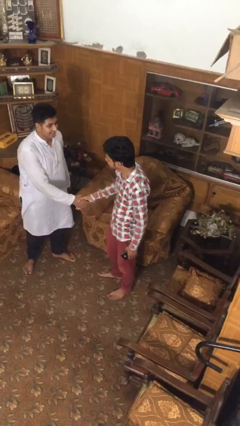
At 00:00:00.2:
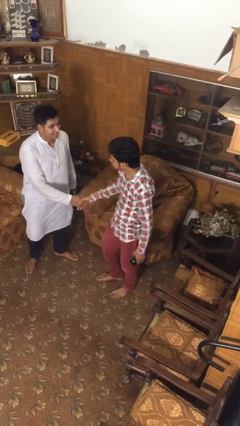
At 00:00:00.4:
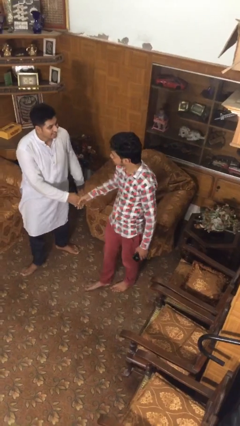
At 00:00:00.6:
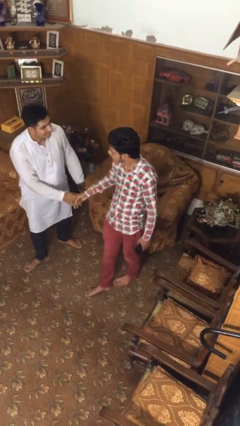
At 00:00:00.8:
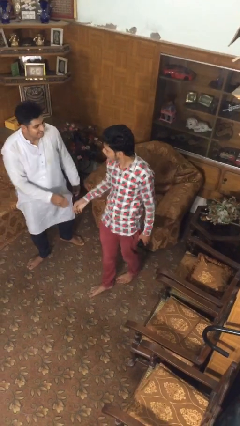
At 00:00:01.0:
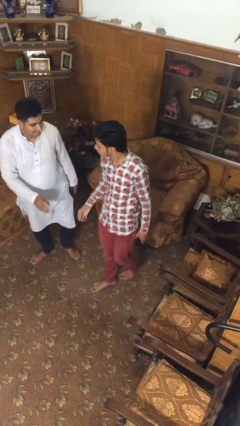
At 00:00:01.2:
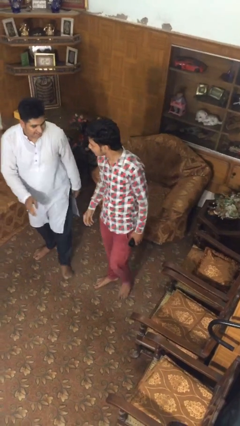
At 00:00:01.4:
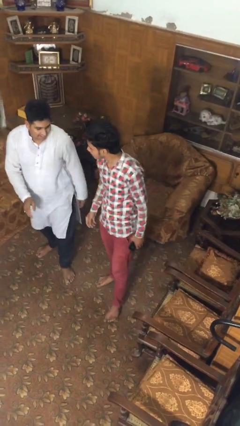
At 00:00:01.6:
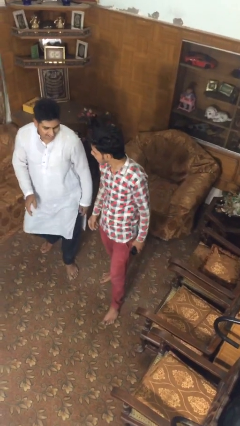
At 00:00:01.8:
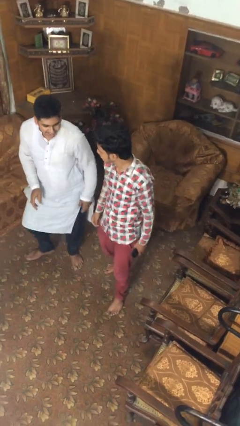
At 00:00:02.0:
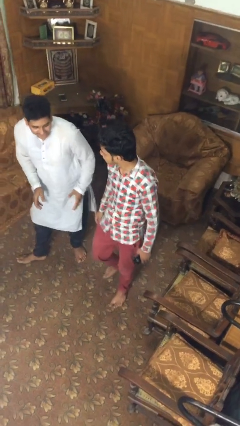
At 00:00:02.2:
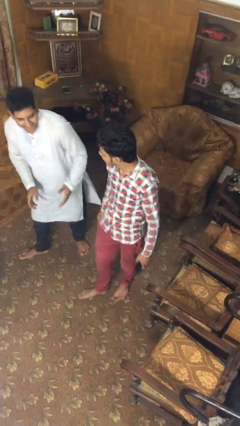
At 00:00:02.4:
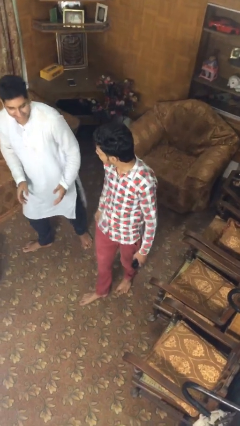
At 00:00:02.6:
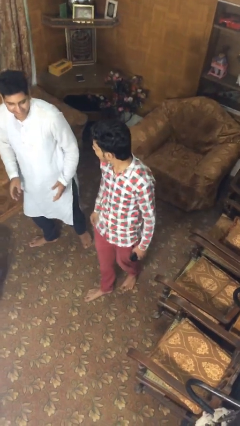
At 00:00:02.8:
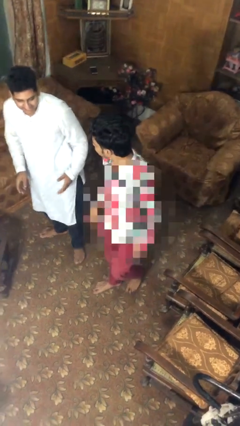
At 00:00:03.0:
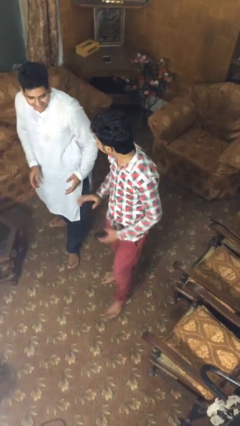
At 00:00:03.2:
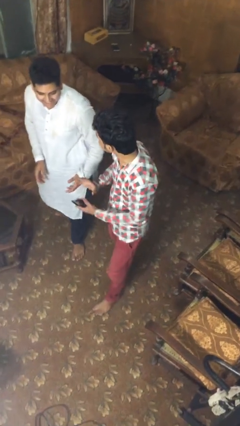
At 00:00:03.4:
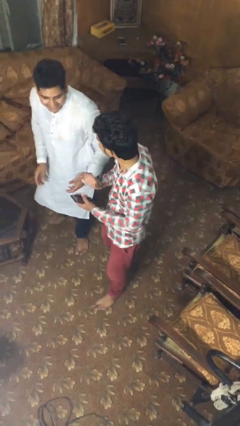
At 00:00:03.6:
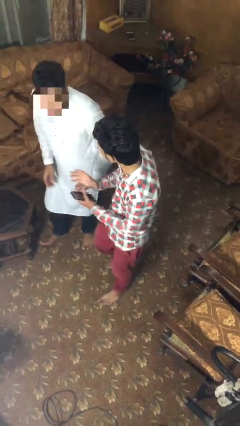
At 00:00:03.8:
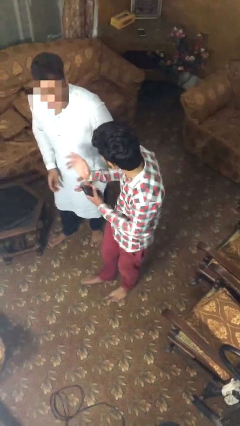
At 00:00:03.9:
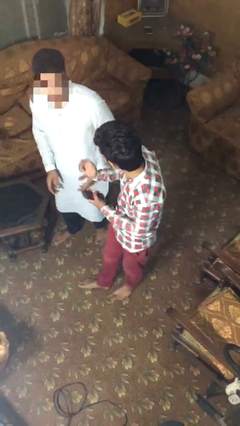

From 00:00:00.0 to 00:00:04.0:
person talks to person

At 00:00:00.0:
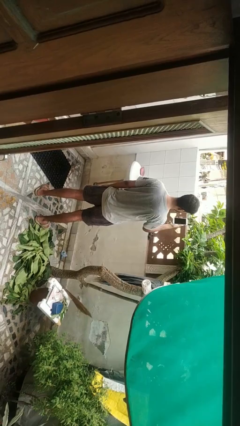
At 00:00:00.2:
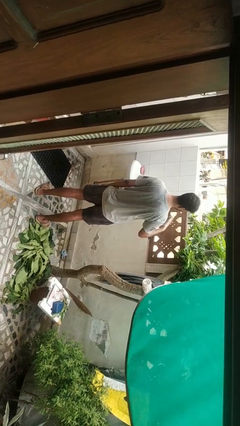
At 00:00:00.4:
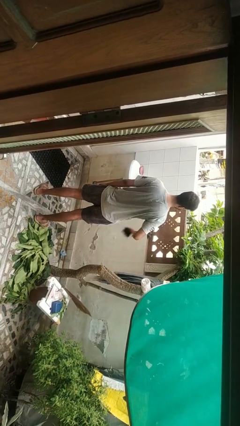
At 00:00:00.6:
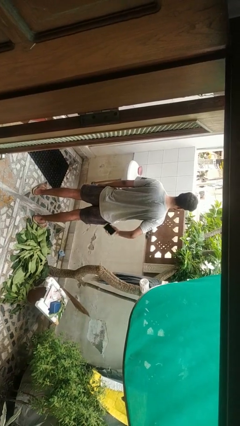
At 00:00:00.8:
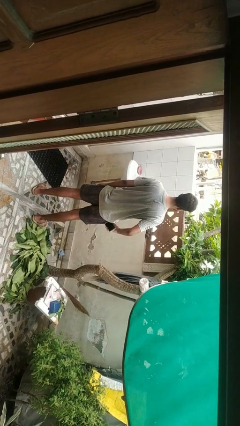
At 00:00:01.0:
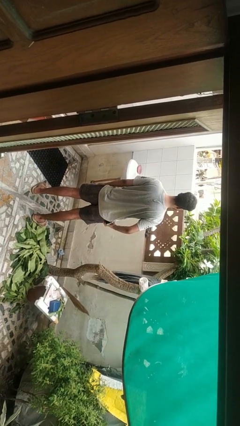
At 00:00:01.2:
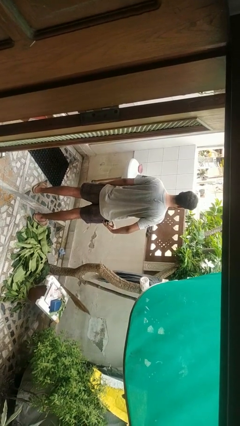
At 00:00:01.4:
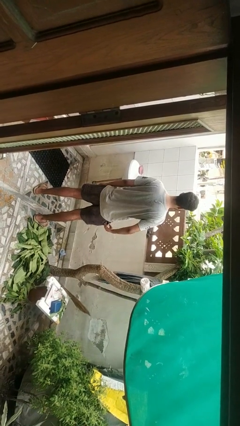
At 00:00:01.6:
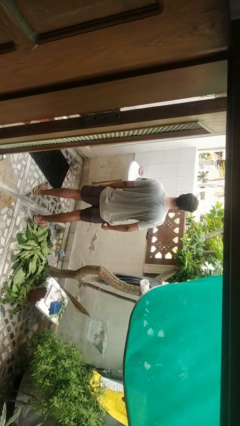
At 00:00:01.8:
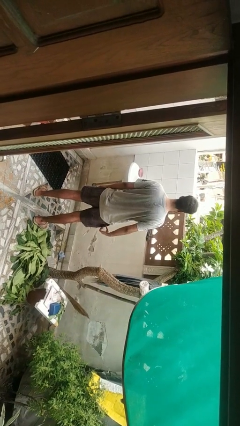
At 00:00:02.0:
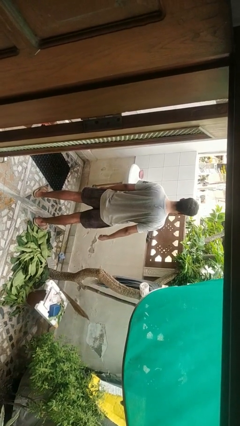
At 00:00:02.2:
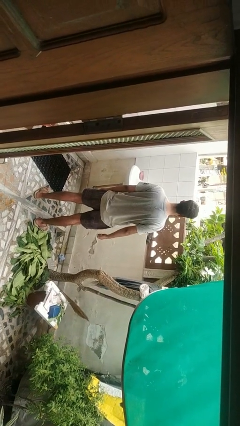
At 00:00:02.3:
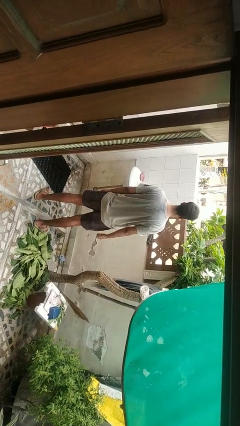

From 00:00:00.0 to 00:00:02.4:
person puts phone into pocket

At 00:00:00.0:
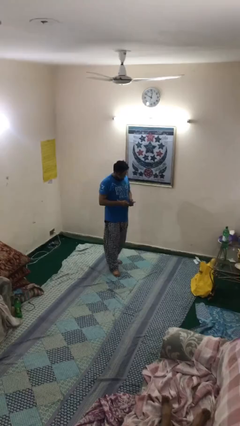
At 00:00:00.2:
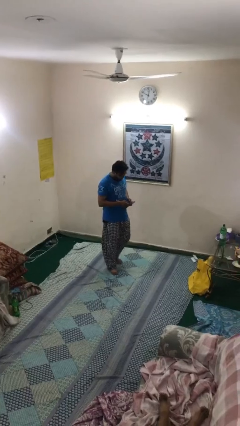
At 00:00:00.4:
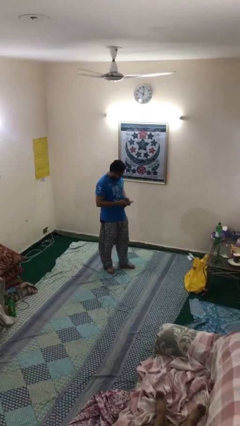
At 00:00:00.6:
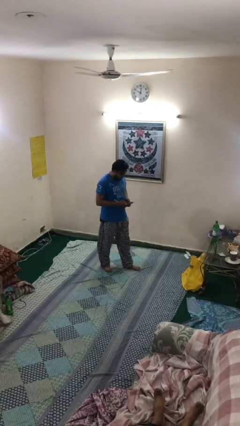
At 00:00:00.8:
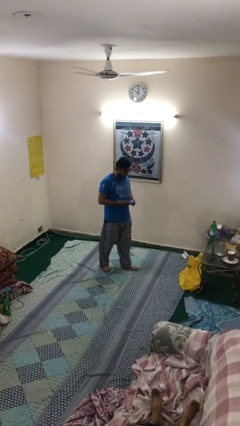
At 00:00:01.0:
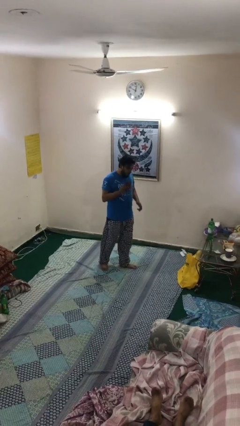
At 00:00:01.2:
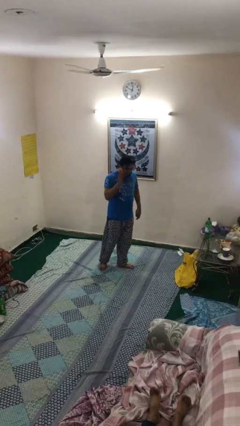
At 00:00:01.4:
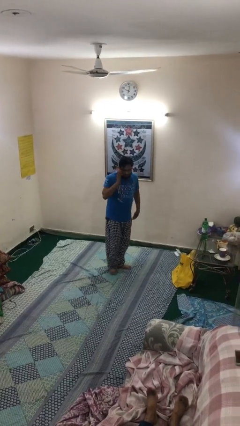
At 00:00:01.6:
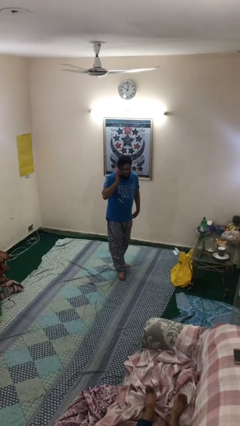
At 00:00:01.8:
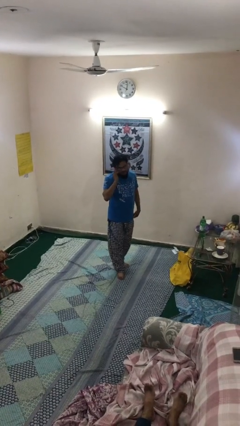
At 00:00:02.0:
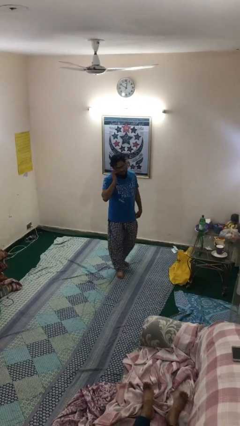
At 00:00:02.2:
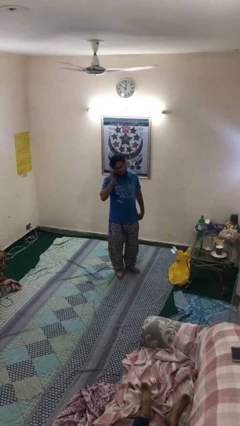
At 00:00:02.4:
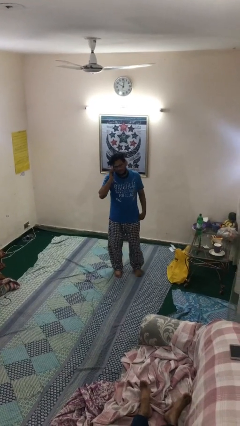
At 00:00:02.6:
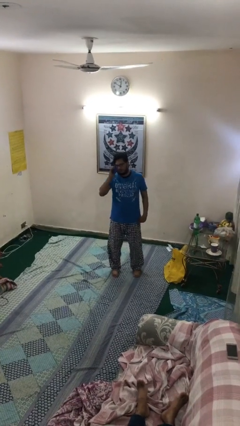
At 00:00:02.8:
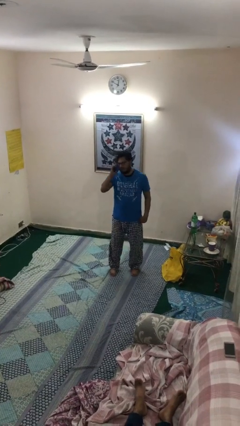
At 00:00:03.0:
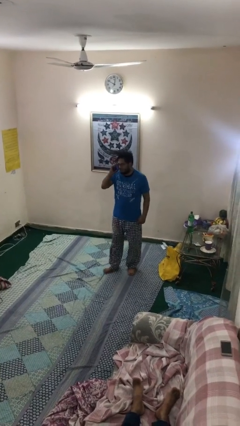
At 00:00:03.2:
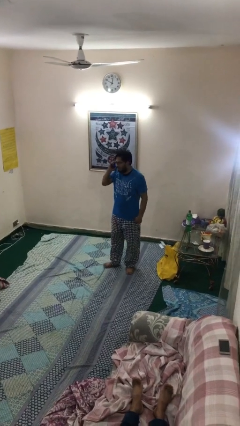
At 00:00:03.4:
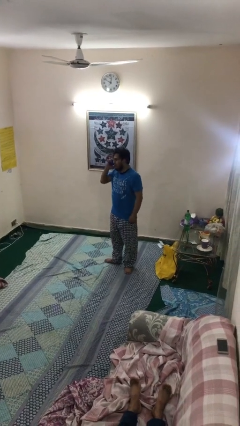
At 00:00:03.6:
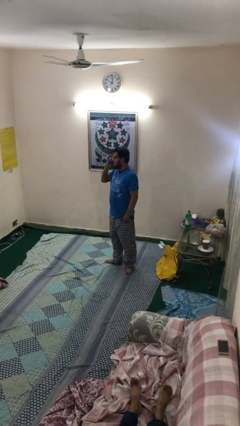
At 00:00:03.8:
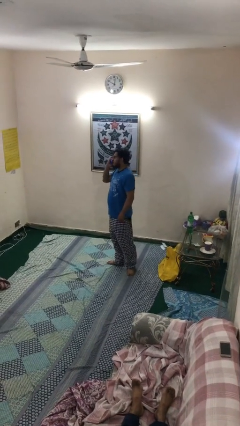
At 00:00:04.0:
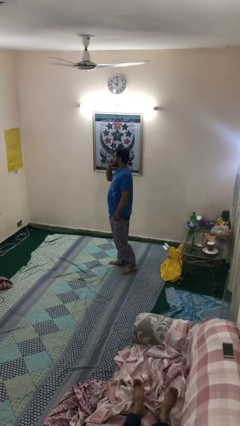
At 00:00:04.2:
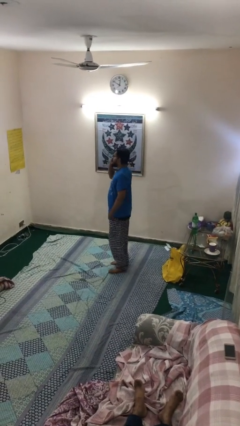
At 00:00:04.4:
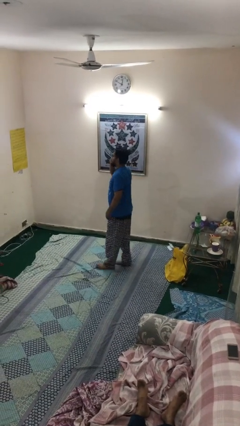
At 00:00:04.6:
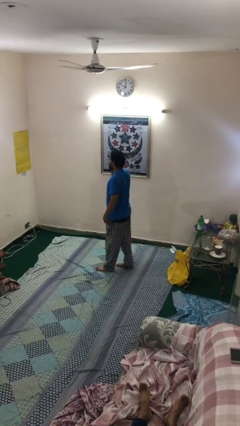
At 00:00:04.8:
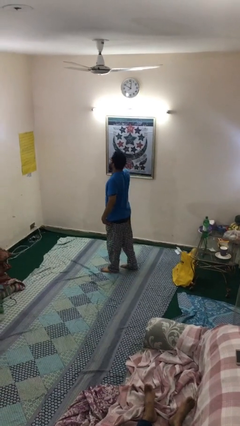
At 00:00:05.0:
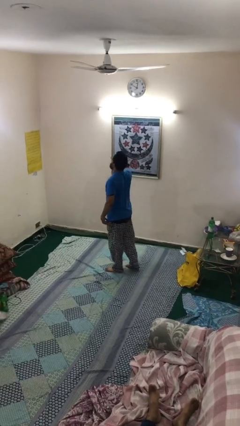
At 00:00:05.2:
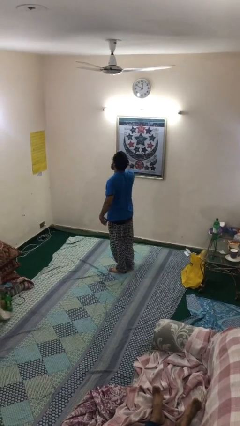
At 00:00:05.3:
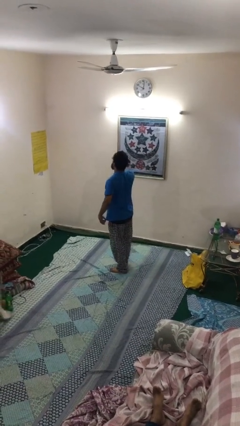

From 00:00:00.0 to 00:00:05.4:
person talks on phone

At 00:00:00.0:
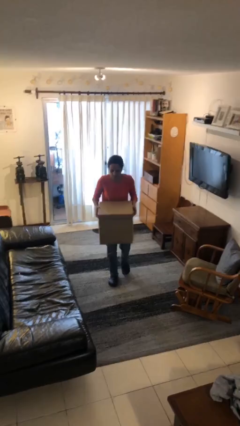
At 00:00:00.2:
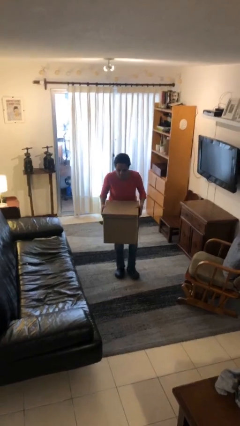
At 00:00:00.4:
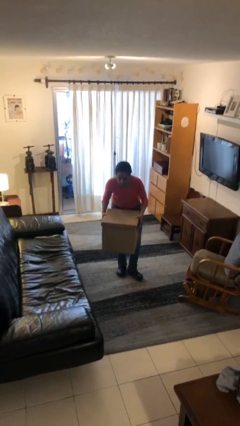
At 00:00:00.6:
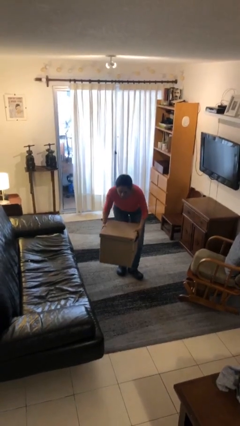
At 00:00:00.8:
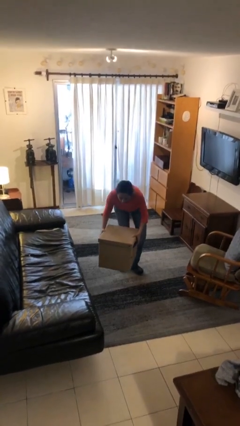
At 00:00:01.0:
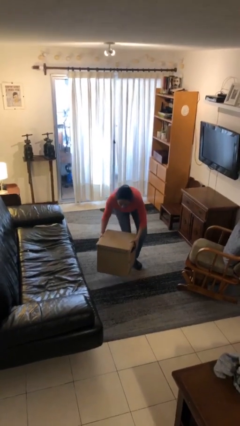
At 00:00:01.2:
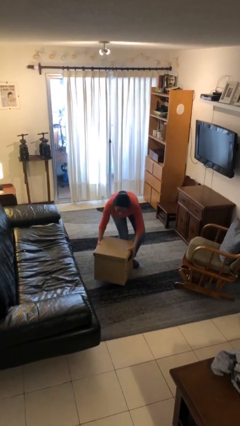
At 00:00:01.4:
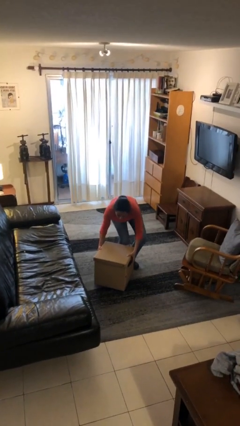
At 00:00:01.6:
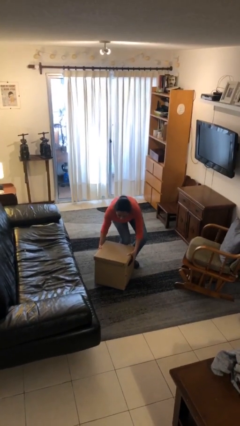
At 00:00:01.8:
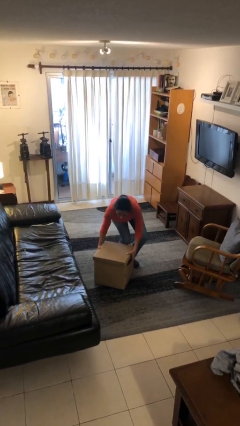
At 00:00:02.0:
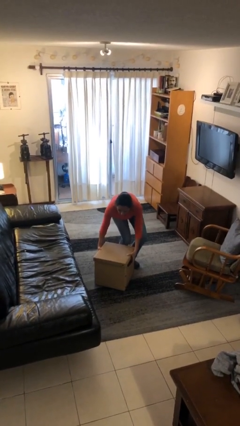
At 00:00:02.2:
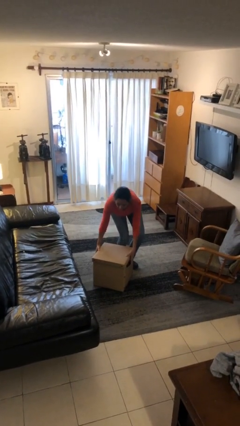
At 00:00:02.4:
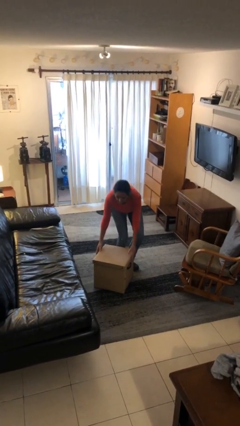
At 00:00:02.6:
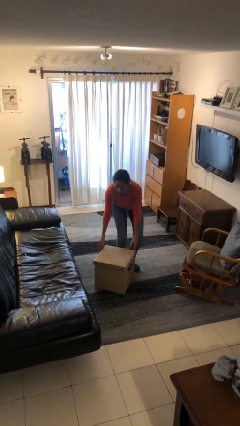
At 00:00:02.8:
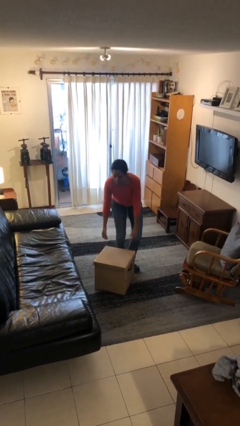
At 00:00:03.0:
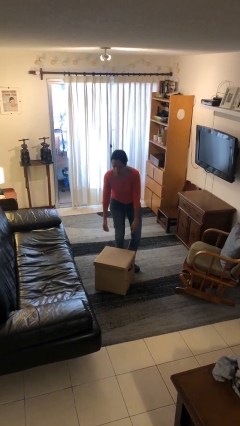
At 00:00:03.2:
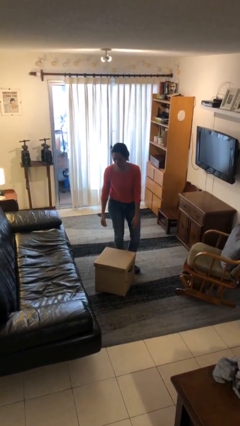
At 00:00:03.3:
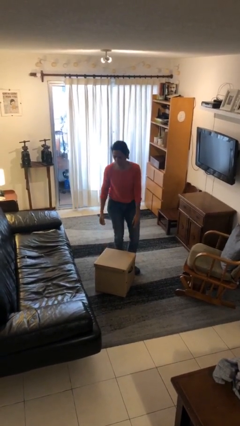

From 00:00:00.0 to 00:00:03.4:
person puts down object on floor

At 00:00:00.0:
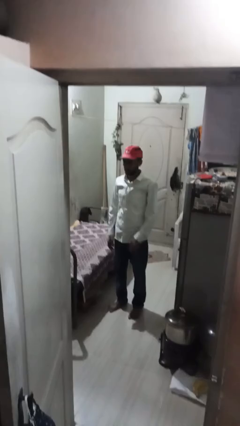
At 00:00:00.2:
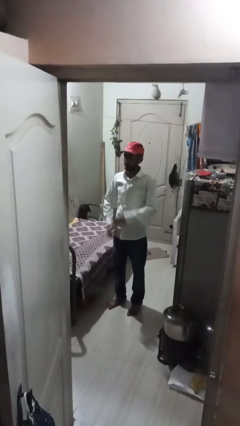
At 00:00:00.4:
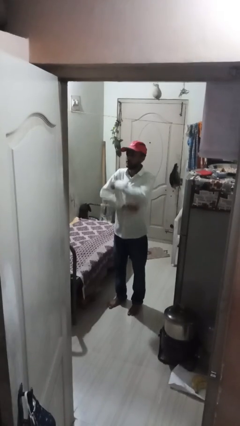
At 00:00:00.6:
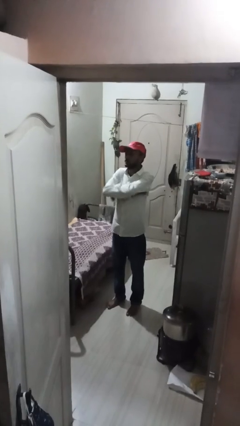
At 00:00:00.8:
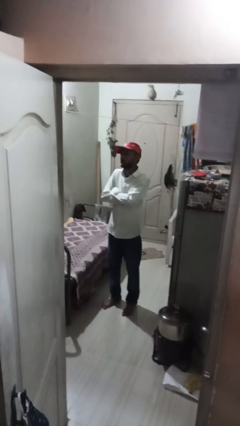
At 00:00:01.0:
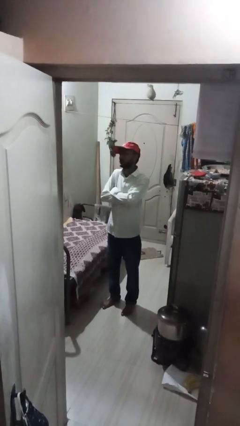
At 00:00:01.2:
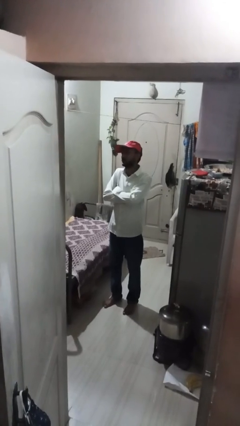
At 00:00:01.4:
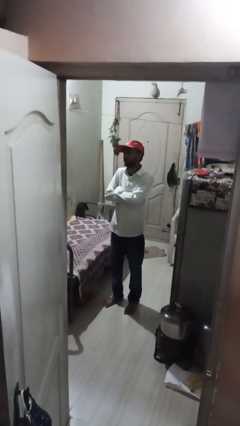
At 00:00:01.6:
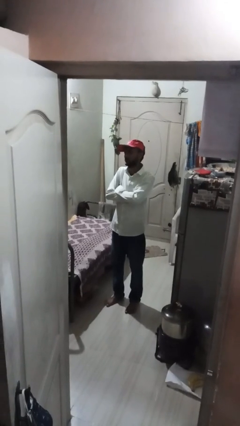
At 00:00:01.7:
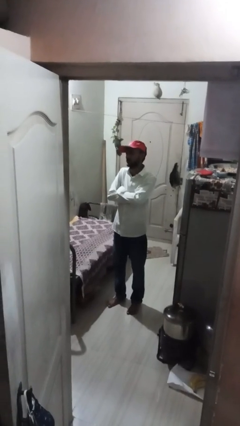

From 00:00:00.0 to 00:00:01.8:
person crosses arms

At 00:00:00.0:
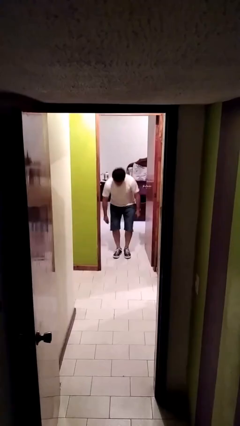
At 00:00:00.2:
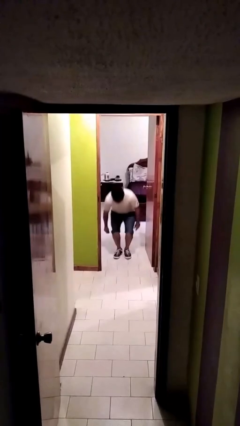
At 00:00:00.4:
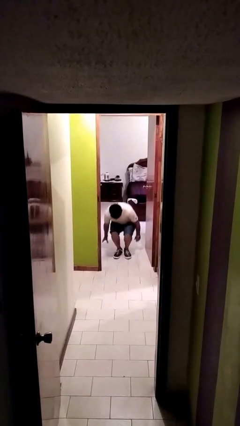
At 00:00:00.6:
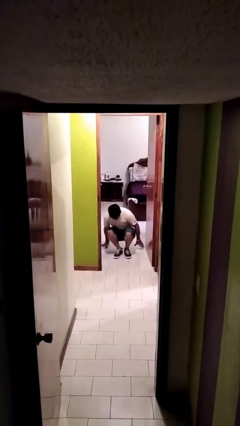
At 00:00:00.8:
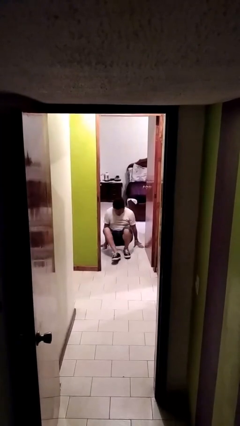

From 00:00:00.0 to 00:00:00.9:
person sits down
